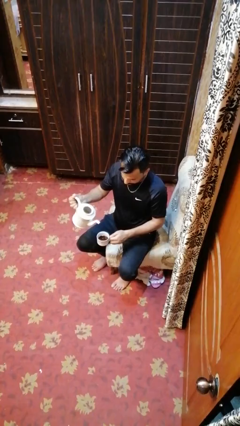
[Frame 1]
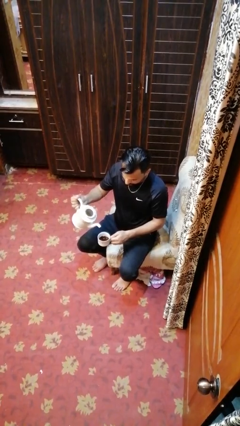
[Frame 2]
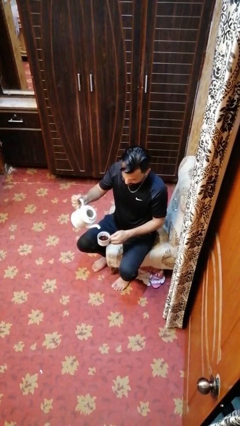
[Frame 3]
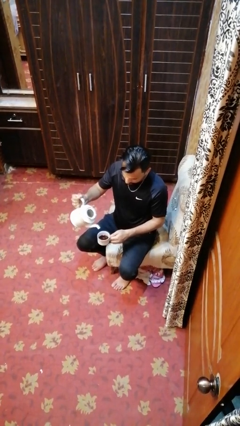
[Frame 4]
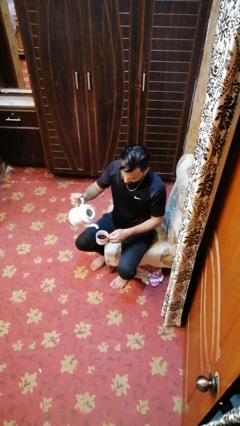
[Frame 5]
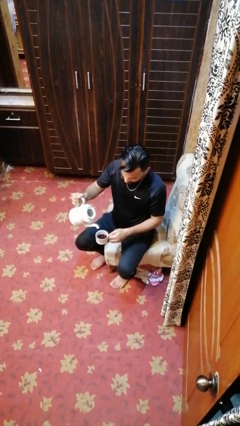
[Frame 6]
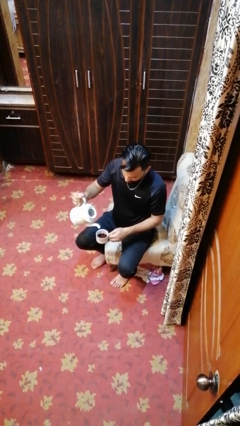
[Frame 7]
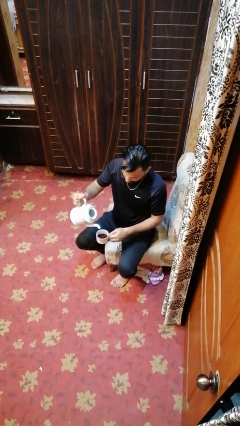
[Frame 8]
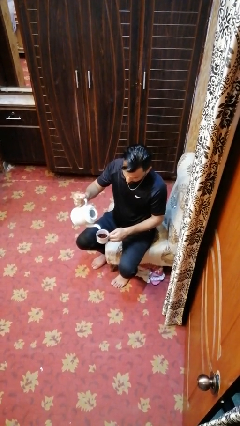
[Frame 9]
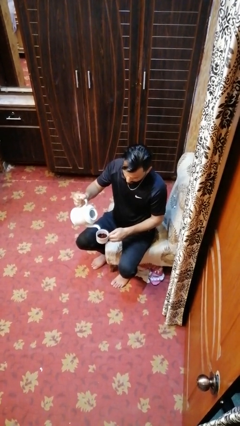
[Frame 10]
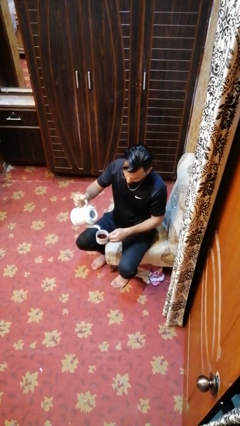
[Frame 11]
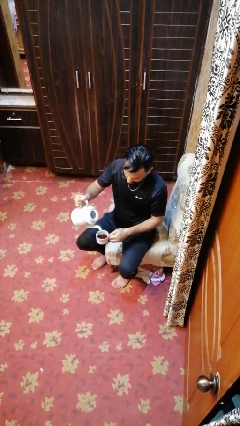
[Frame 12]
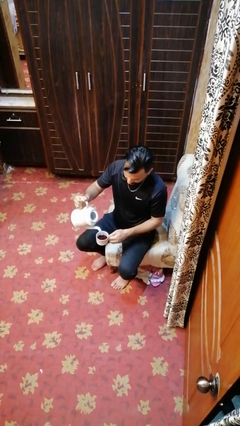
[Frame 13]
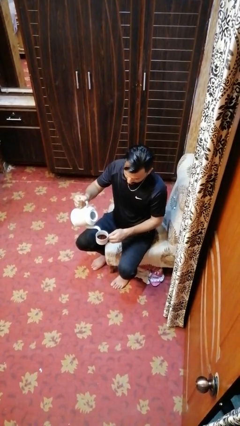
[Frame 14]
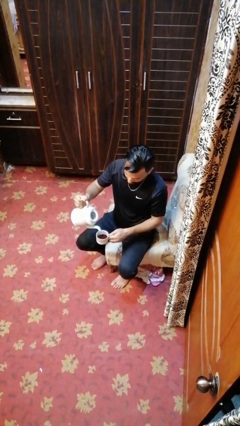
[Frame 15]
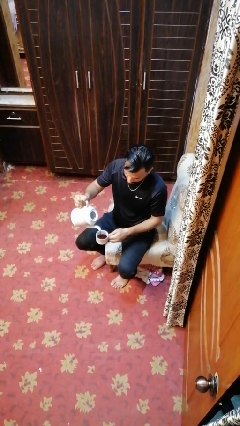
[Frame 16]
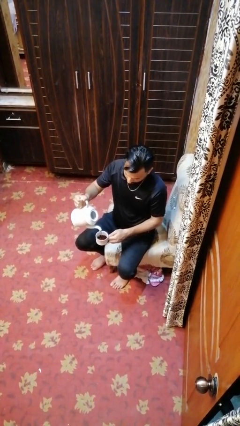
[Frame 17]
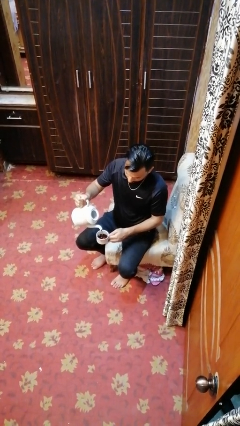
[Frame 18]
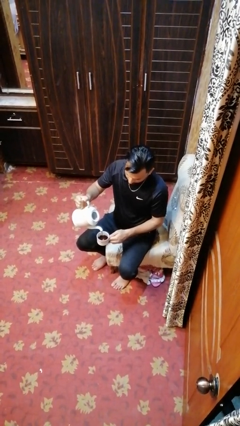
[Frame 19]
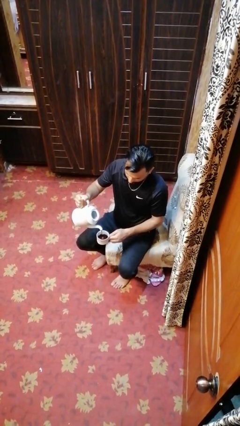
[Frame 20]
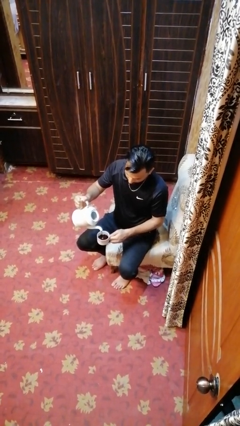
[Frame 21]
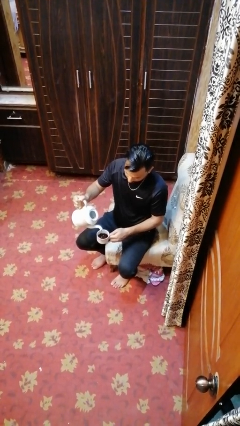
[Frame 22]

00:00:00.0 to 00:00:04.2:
person pours coffee into mug

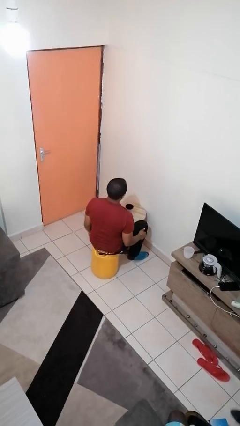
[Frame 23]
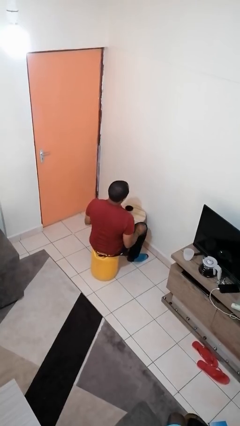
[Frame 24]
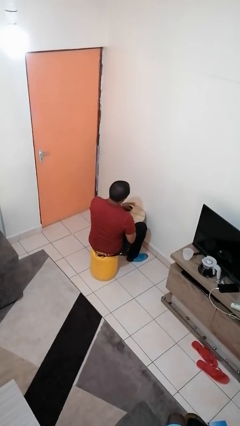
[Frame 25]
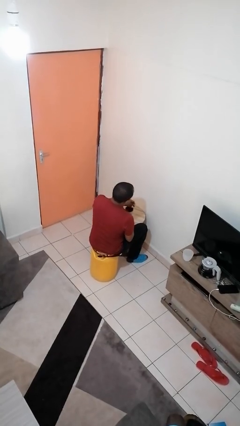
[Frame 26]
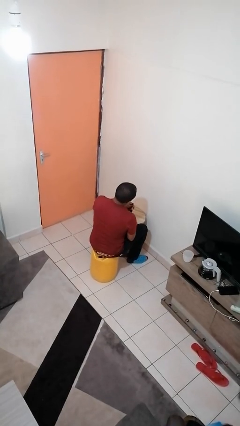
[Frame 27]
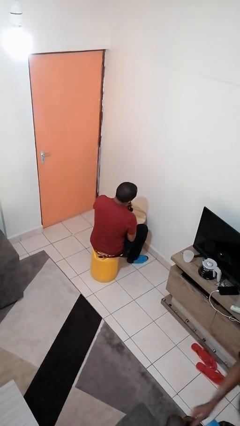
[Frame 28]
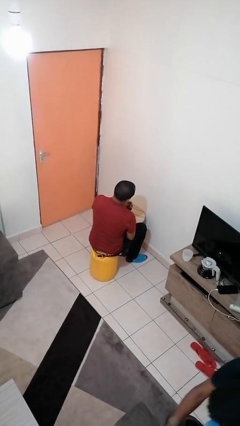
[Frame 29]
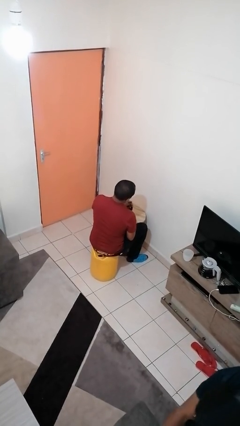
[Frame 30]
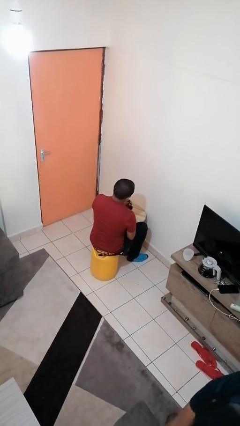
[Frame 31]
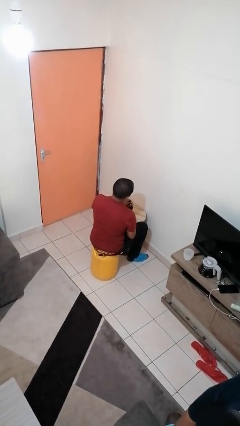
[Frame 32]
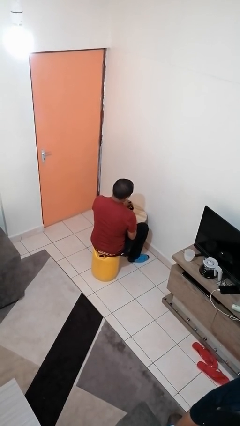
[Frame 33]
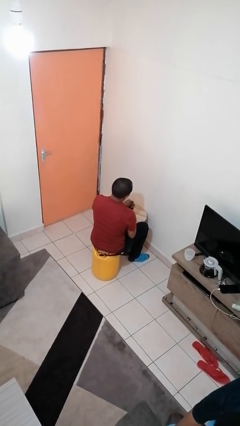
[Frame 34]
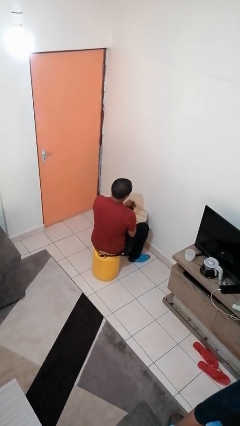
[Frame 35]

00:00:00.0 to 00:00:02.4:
person stirs mug

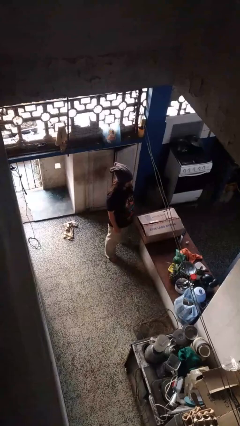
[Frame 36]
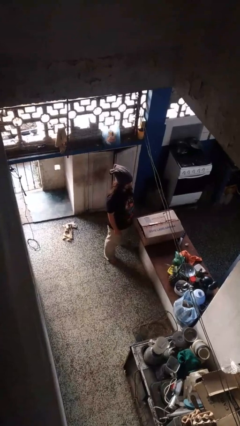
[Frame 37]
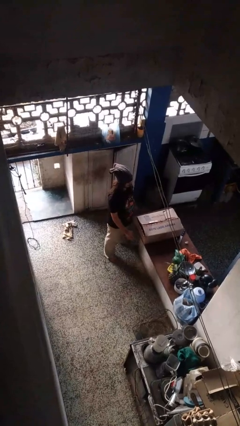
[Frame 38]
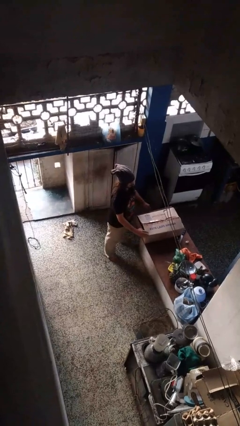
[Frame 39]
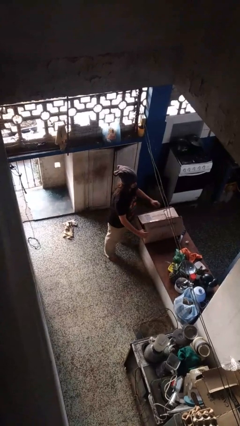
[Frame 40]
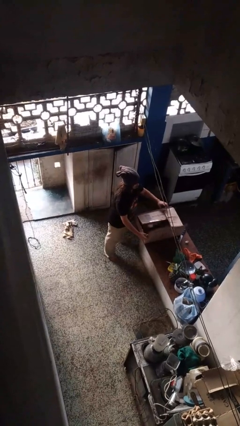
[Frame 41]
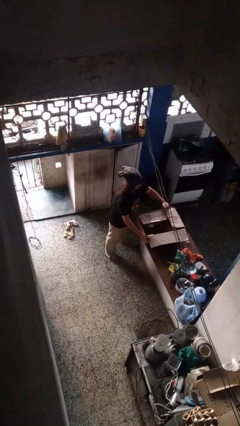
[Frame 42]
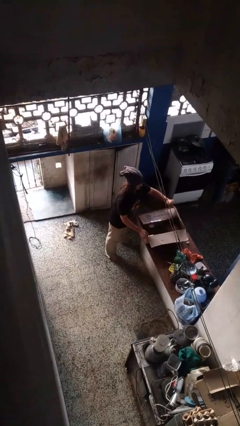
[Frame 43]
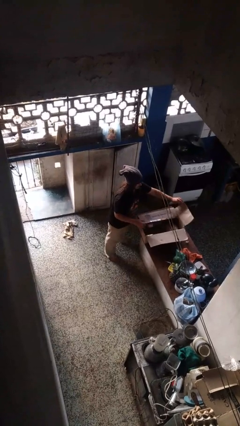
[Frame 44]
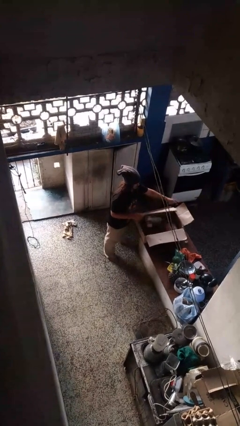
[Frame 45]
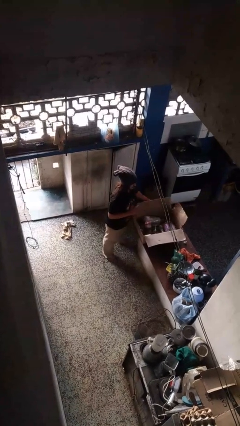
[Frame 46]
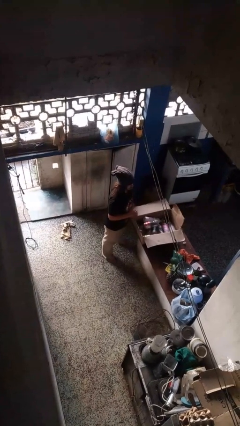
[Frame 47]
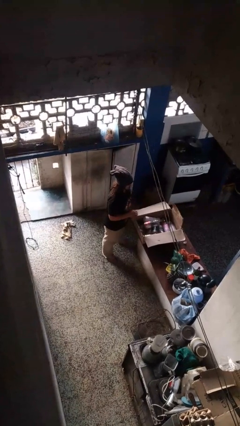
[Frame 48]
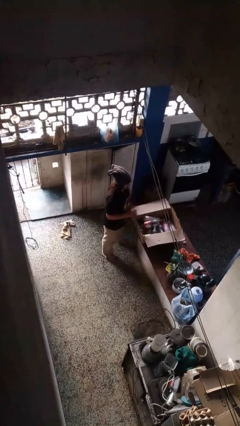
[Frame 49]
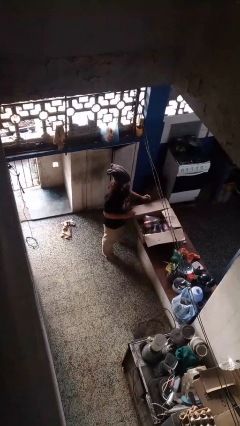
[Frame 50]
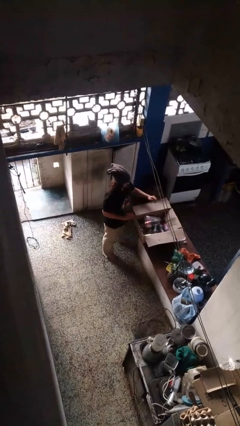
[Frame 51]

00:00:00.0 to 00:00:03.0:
person opens box

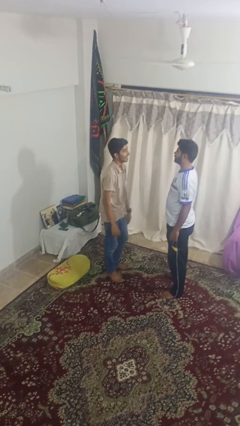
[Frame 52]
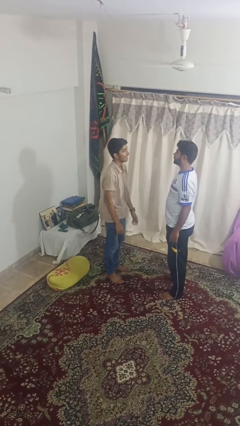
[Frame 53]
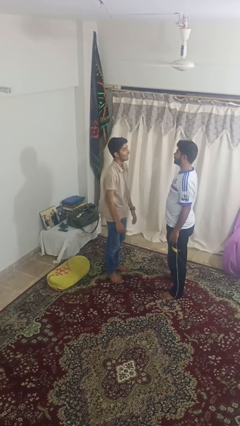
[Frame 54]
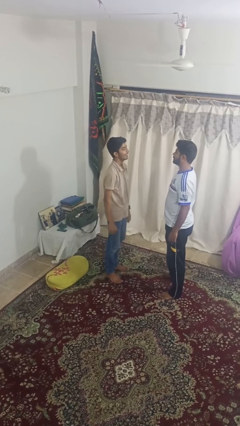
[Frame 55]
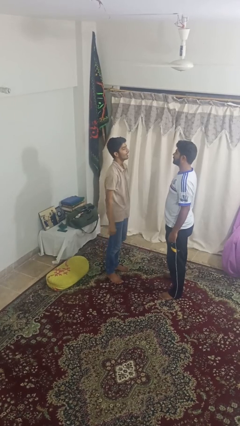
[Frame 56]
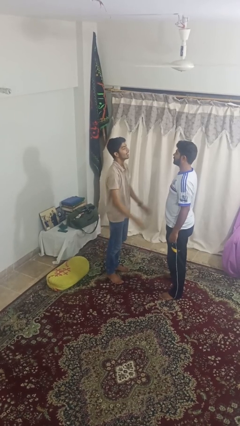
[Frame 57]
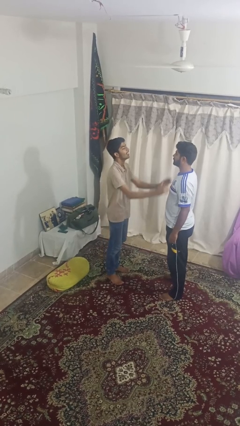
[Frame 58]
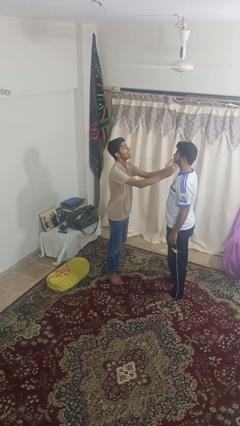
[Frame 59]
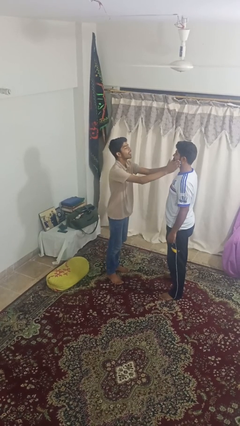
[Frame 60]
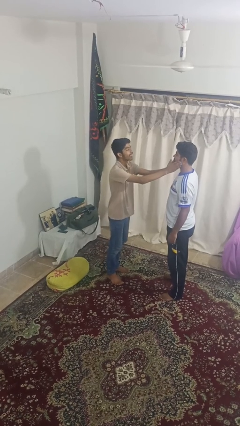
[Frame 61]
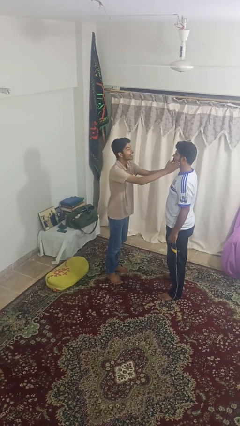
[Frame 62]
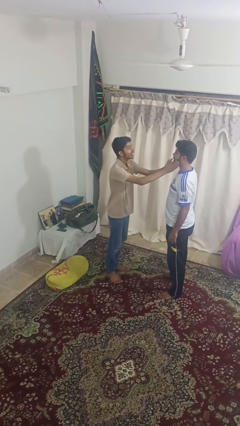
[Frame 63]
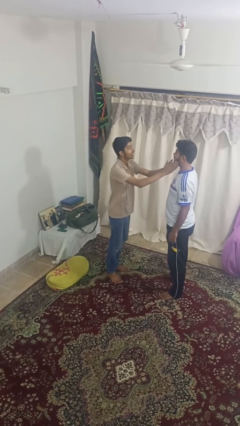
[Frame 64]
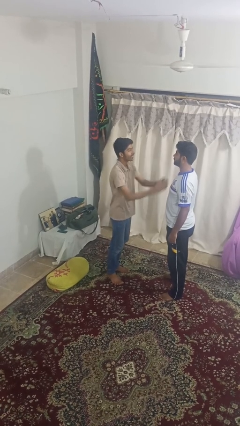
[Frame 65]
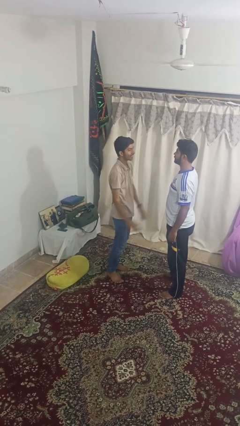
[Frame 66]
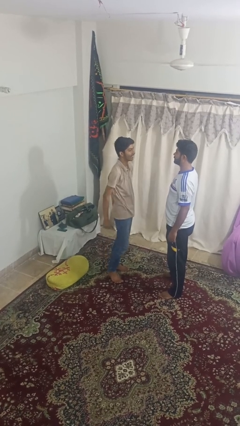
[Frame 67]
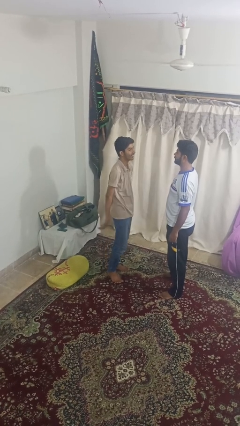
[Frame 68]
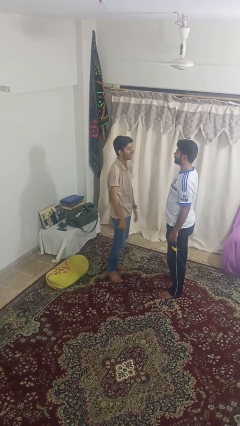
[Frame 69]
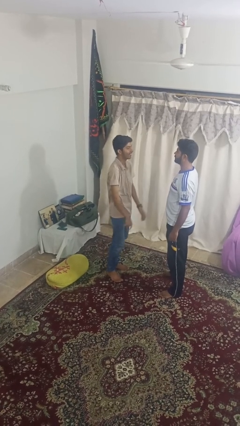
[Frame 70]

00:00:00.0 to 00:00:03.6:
person touches face of person

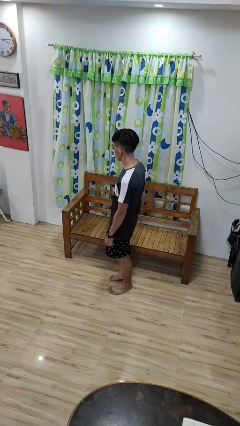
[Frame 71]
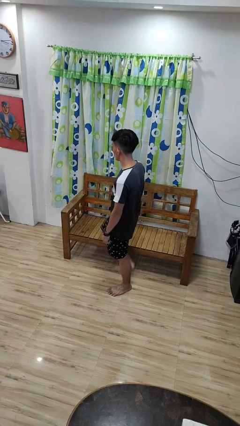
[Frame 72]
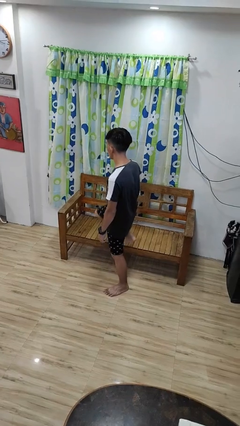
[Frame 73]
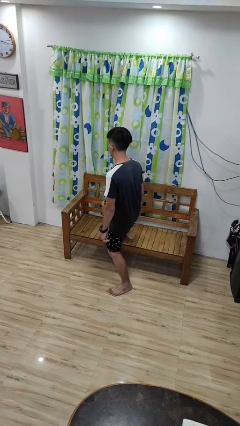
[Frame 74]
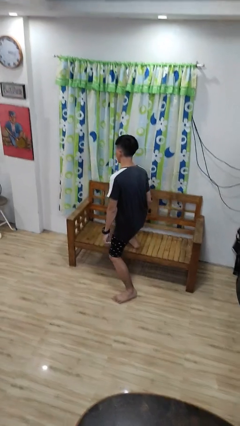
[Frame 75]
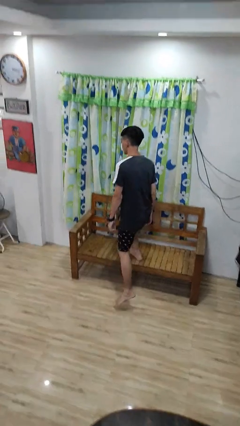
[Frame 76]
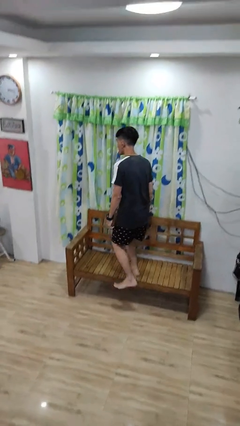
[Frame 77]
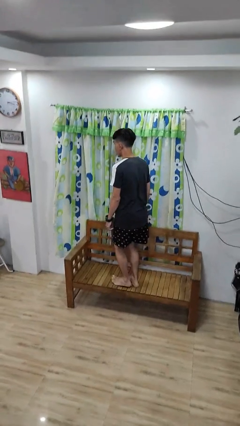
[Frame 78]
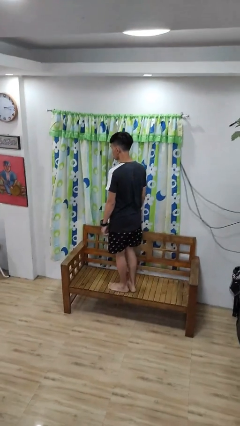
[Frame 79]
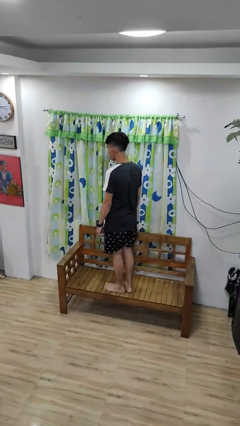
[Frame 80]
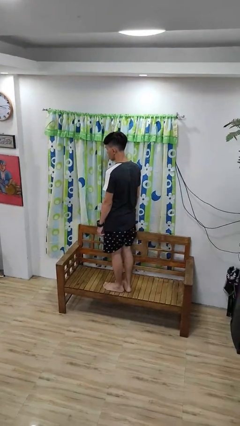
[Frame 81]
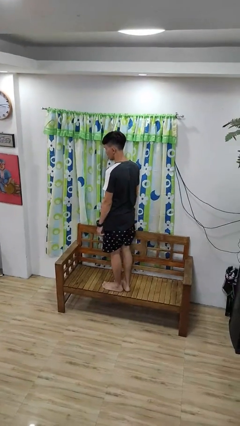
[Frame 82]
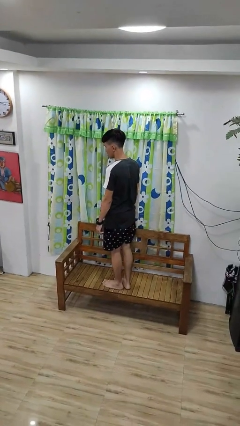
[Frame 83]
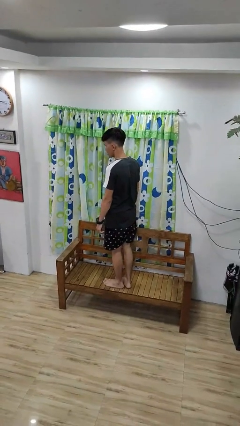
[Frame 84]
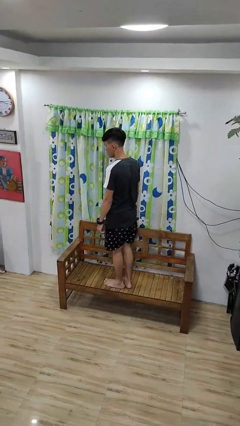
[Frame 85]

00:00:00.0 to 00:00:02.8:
person climbs on couch

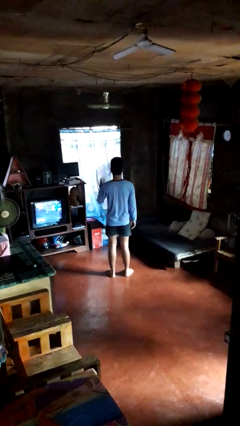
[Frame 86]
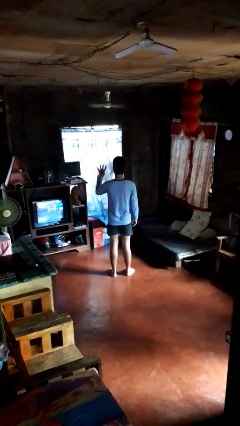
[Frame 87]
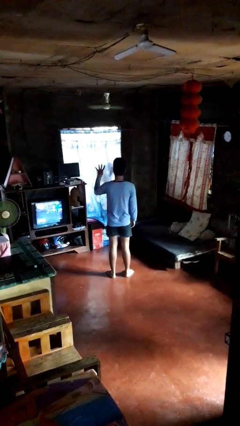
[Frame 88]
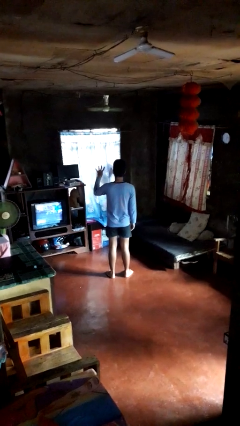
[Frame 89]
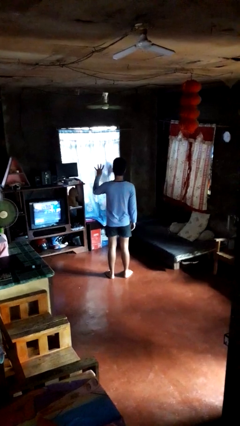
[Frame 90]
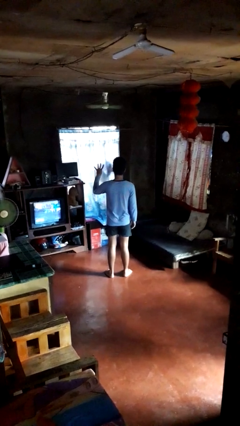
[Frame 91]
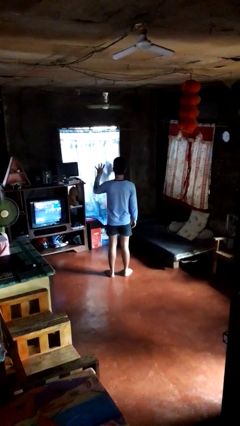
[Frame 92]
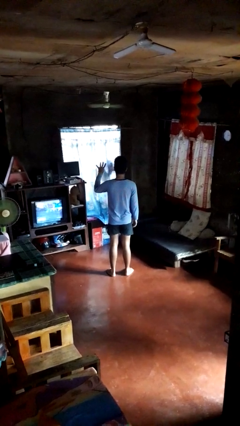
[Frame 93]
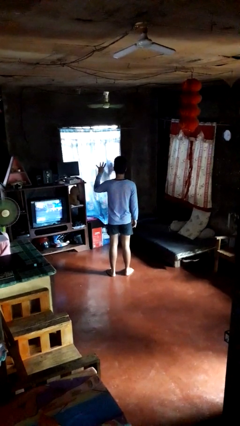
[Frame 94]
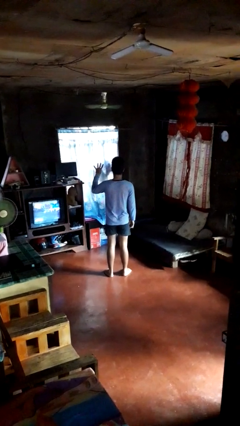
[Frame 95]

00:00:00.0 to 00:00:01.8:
person gestures number four
